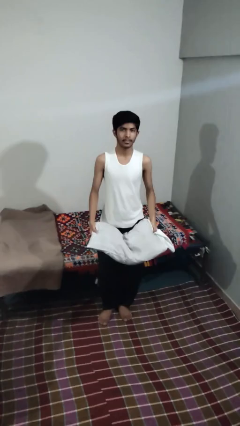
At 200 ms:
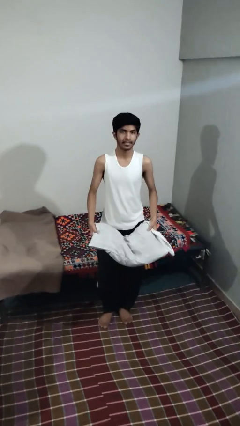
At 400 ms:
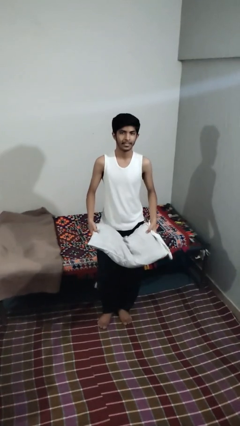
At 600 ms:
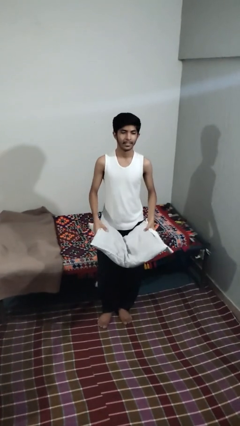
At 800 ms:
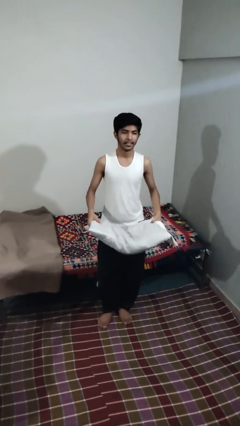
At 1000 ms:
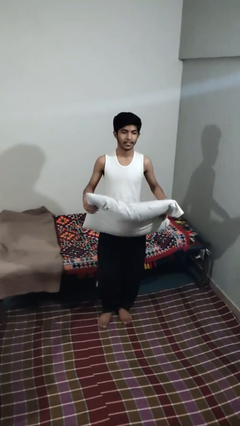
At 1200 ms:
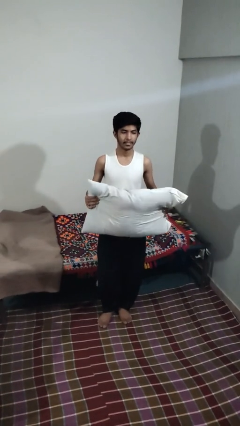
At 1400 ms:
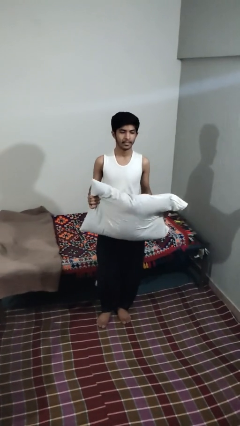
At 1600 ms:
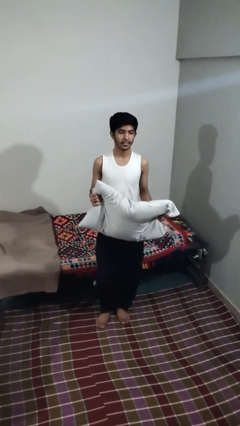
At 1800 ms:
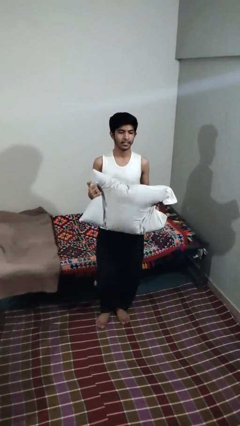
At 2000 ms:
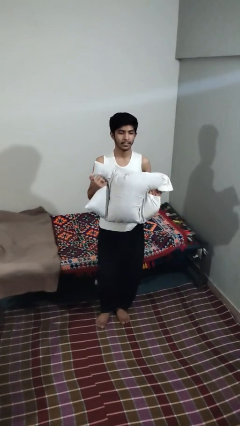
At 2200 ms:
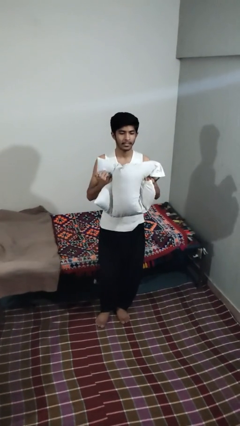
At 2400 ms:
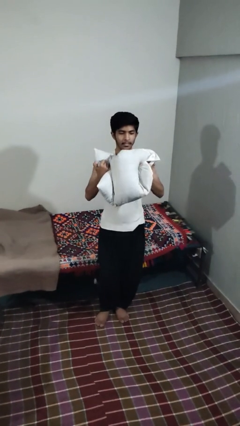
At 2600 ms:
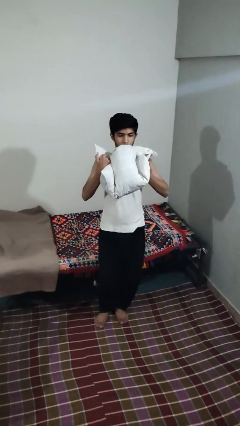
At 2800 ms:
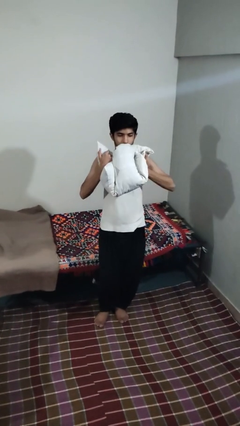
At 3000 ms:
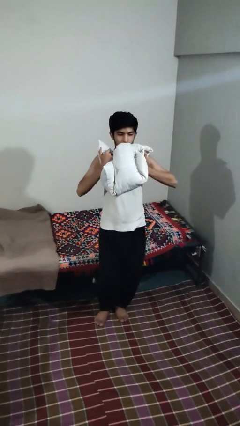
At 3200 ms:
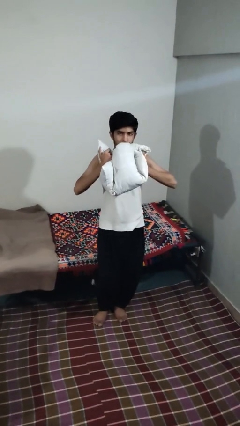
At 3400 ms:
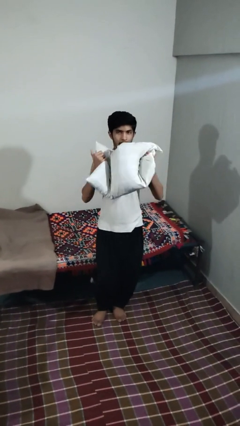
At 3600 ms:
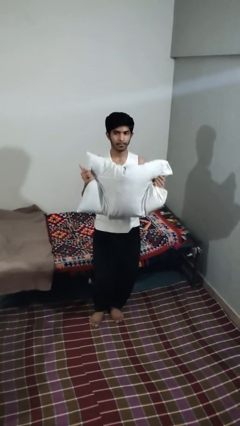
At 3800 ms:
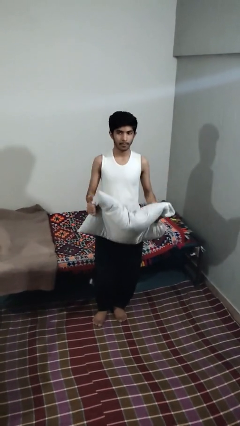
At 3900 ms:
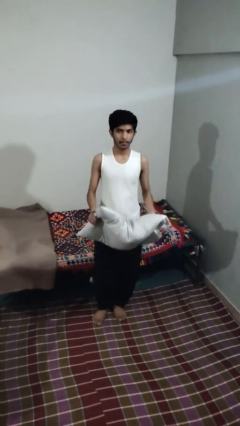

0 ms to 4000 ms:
person squeezes object

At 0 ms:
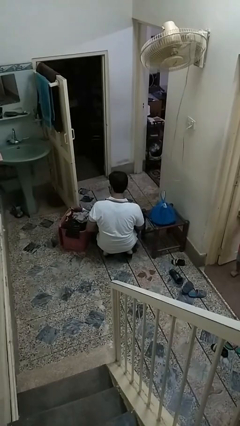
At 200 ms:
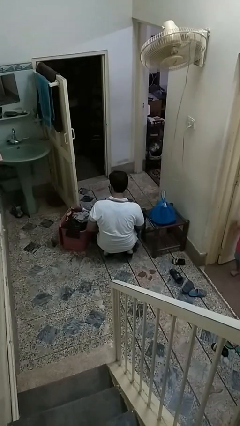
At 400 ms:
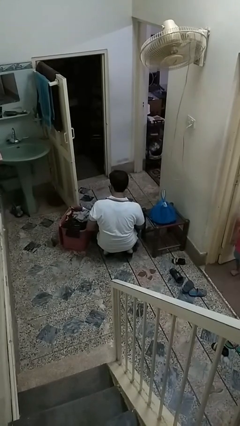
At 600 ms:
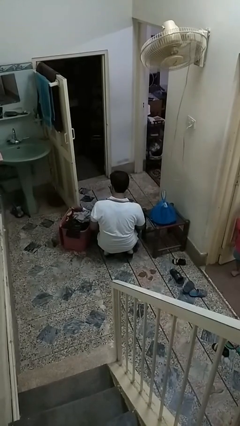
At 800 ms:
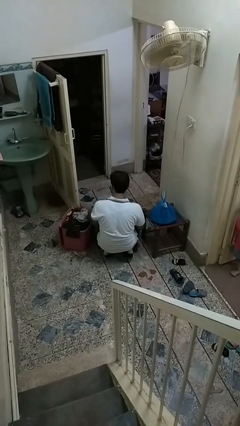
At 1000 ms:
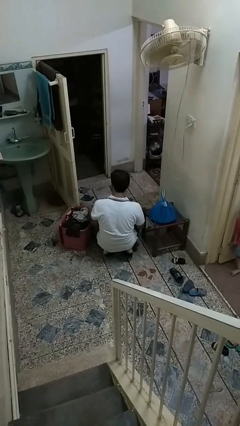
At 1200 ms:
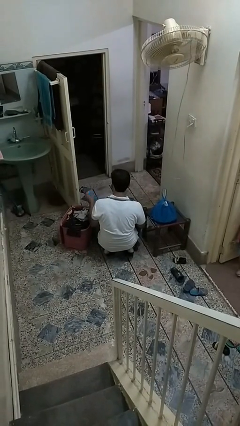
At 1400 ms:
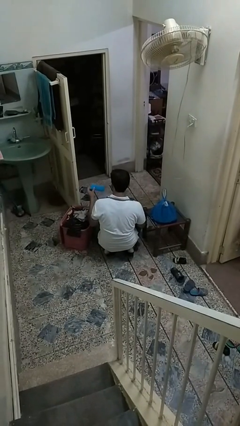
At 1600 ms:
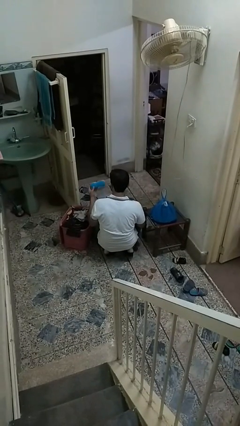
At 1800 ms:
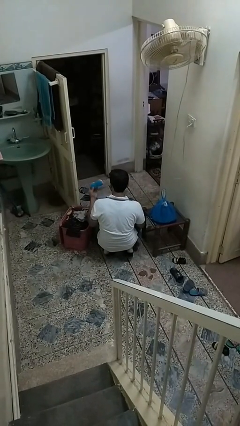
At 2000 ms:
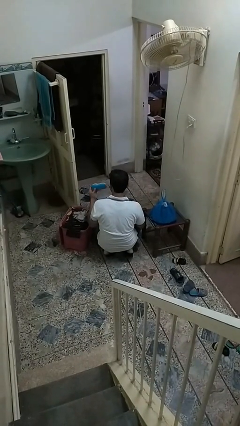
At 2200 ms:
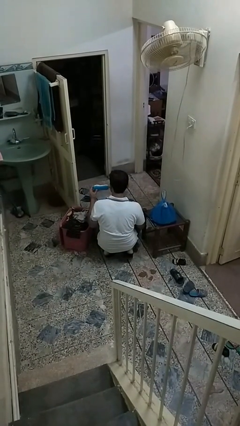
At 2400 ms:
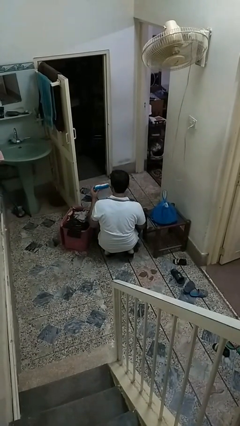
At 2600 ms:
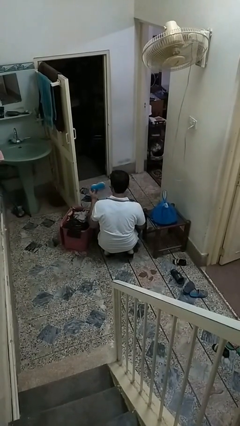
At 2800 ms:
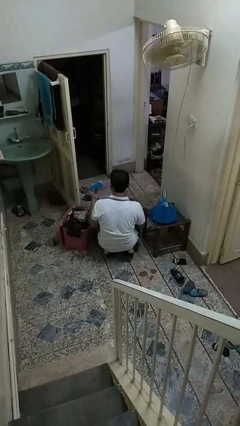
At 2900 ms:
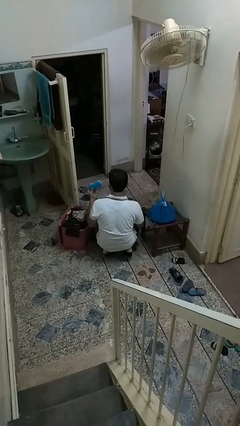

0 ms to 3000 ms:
person takes object from basket

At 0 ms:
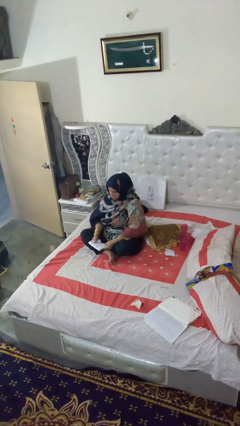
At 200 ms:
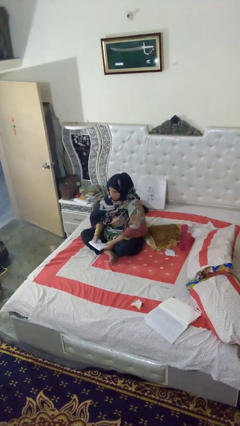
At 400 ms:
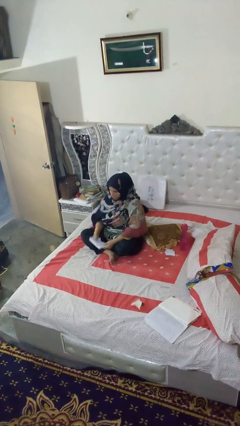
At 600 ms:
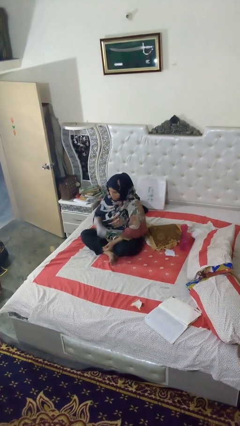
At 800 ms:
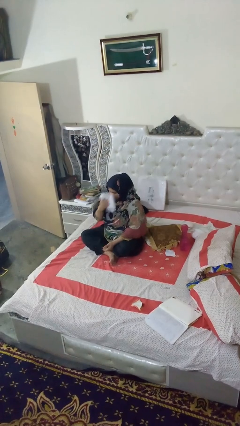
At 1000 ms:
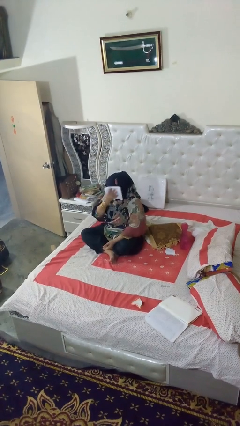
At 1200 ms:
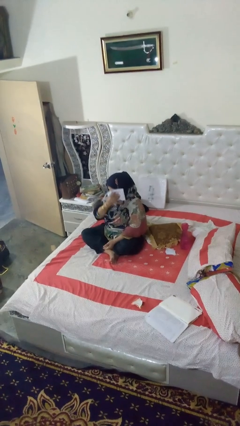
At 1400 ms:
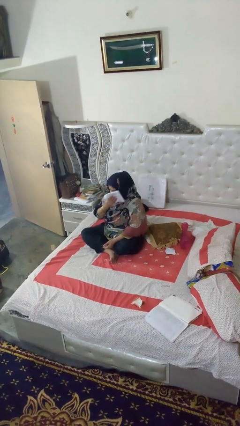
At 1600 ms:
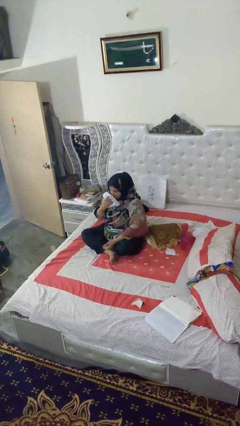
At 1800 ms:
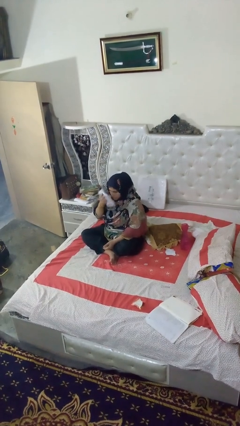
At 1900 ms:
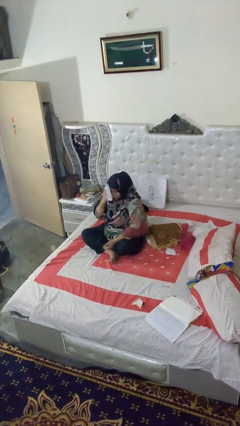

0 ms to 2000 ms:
person wipes mouth with napkin

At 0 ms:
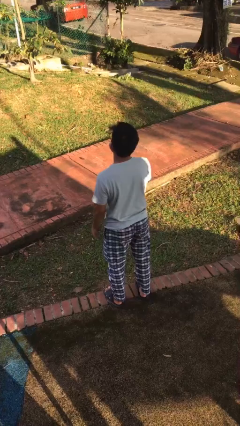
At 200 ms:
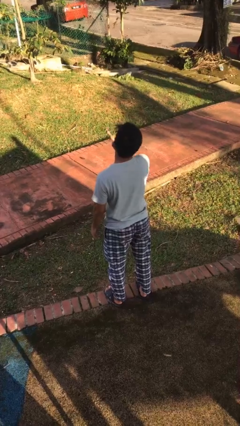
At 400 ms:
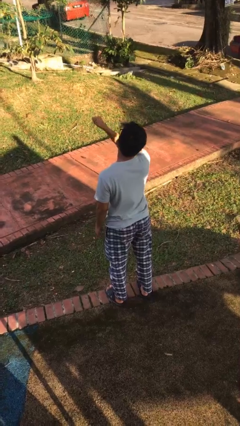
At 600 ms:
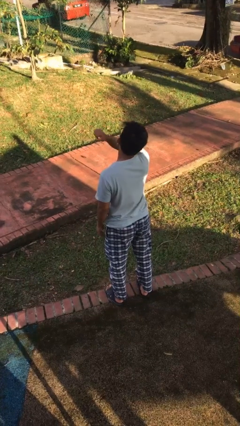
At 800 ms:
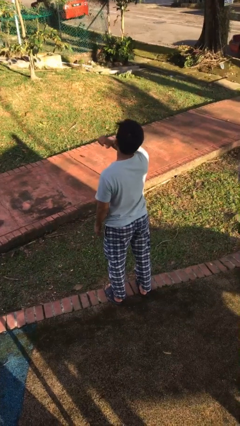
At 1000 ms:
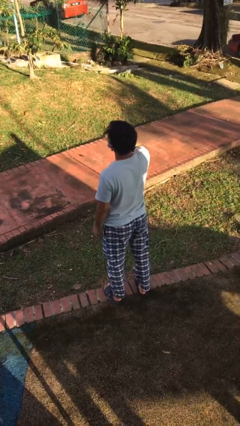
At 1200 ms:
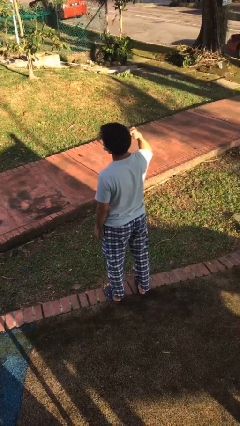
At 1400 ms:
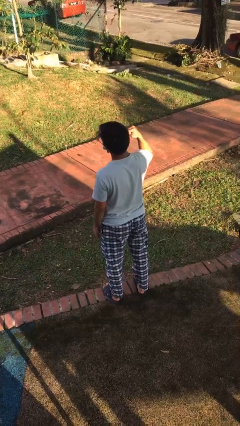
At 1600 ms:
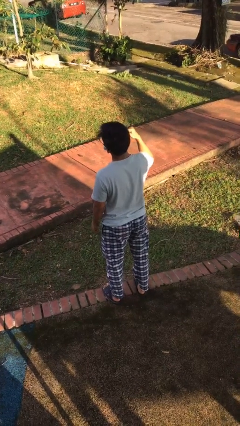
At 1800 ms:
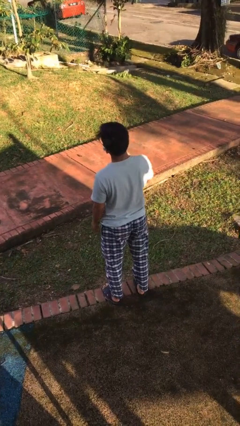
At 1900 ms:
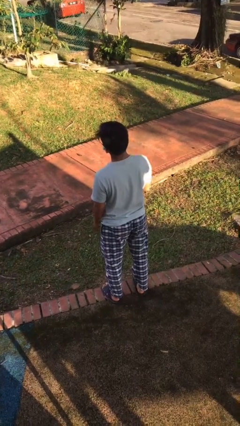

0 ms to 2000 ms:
person gestures cut

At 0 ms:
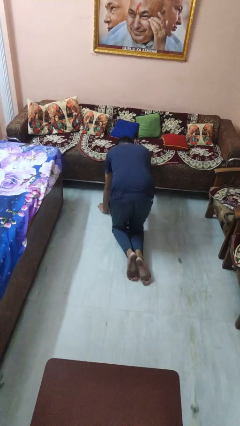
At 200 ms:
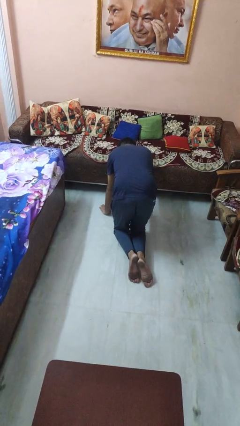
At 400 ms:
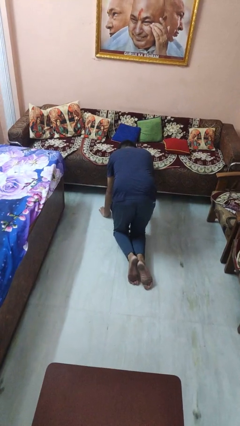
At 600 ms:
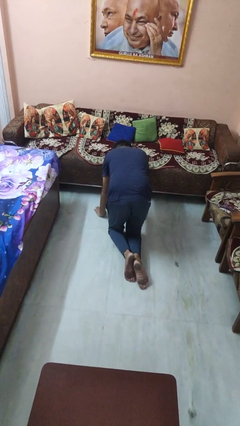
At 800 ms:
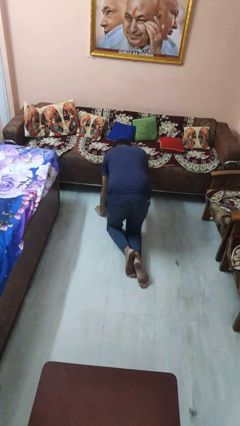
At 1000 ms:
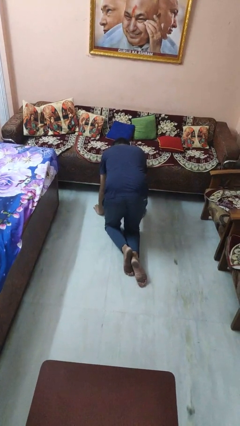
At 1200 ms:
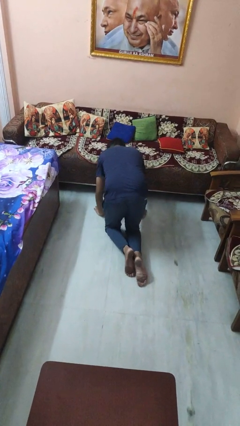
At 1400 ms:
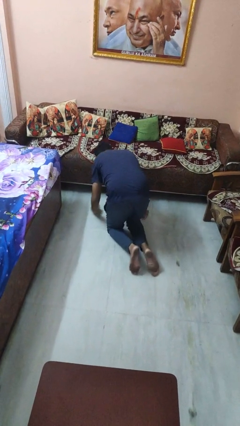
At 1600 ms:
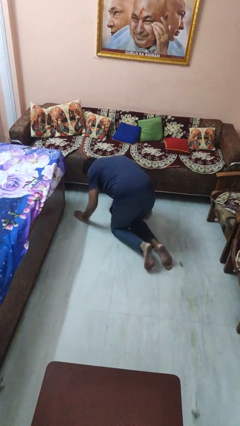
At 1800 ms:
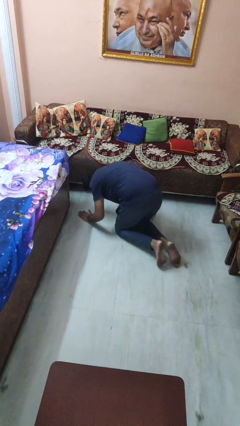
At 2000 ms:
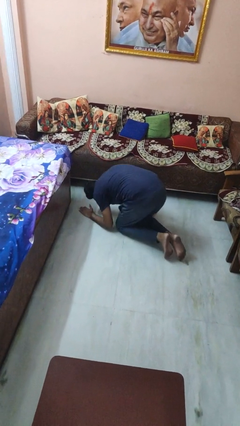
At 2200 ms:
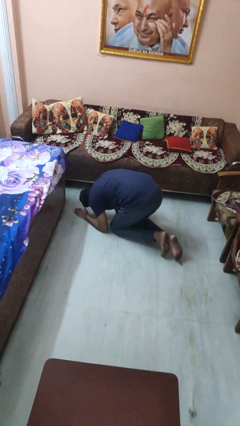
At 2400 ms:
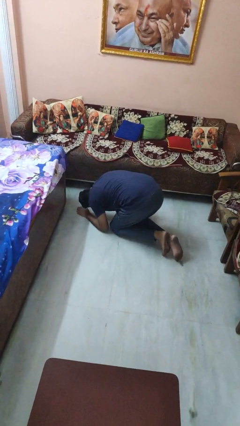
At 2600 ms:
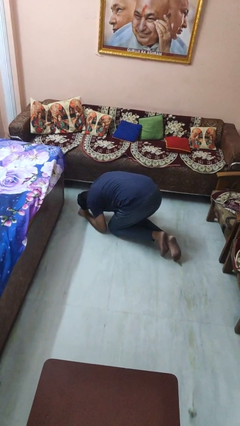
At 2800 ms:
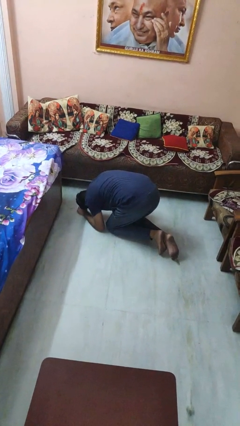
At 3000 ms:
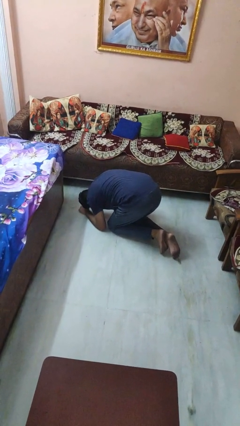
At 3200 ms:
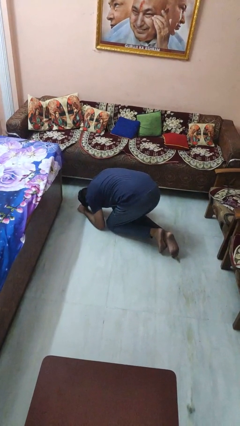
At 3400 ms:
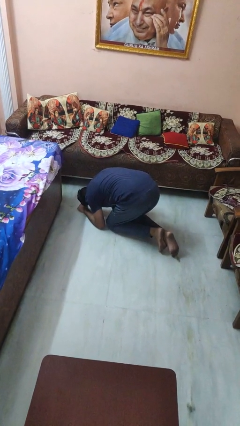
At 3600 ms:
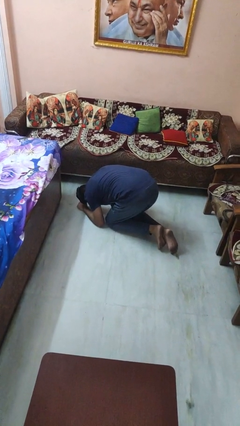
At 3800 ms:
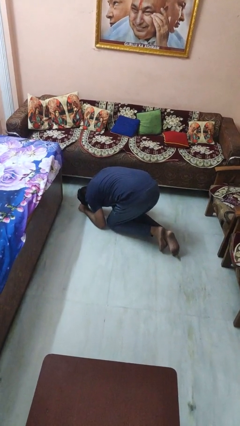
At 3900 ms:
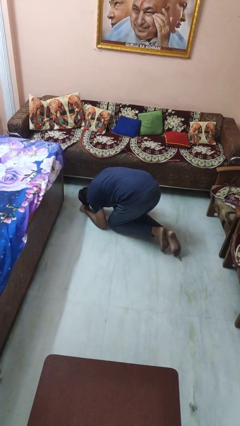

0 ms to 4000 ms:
person searches under couch

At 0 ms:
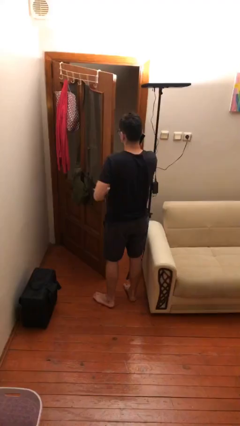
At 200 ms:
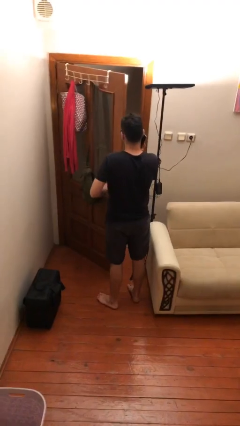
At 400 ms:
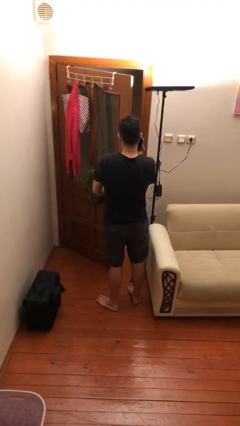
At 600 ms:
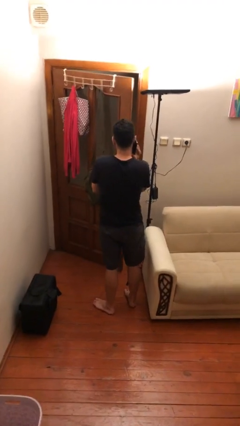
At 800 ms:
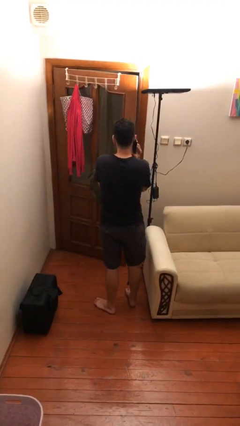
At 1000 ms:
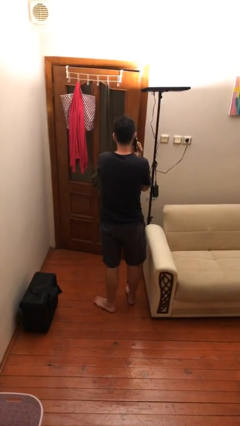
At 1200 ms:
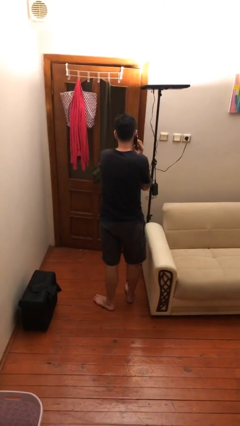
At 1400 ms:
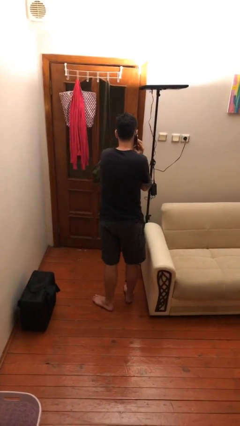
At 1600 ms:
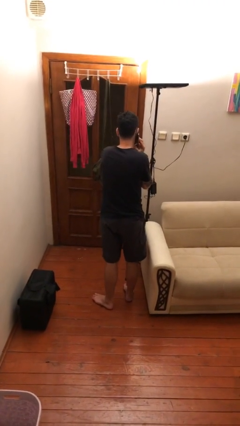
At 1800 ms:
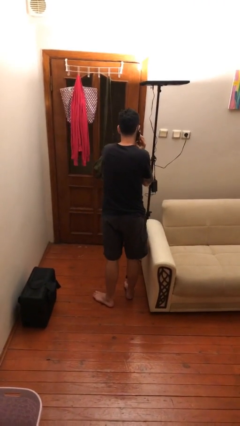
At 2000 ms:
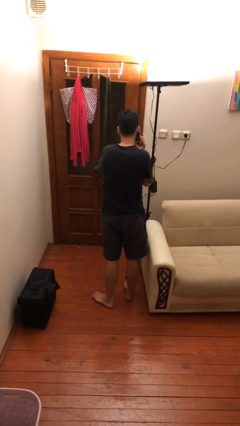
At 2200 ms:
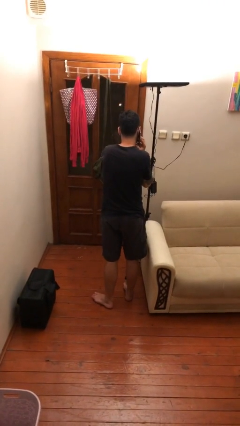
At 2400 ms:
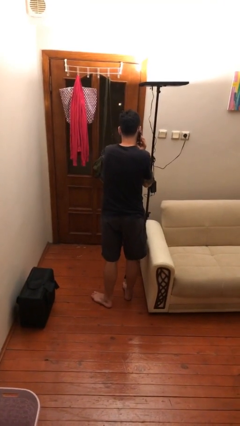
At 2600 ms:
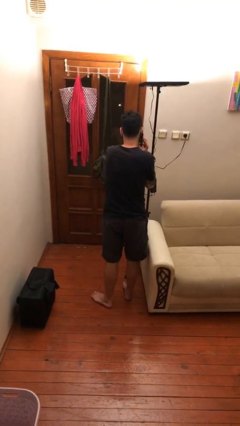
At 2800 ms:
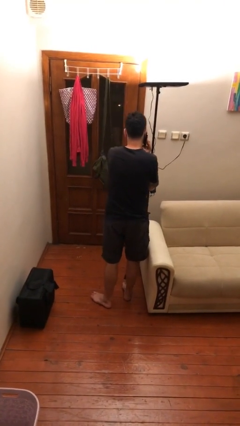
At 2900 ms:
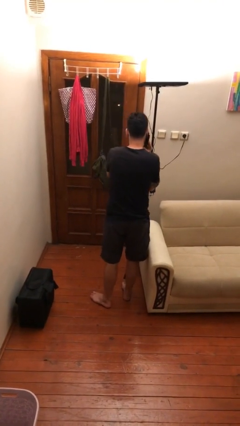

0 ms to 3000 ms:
person closes facility door
